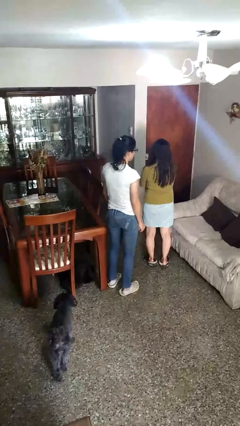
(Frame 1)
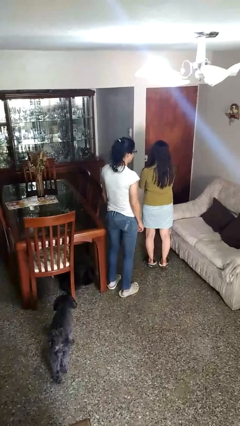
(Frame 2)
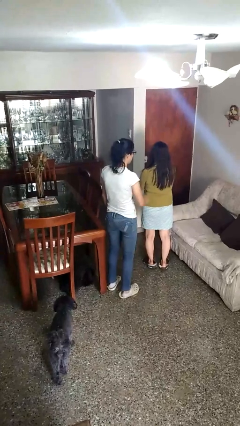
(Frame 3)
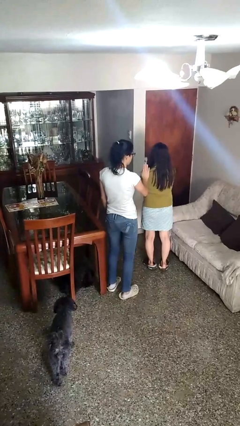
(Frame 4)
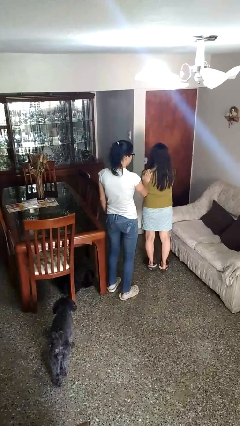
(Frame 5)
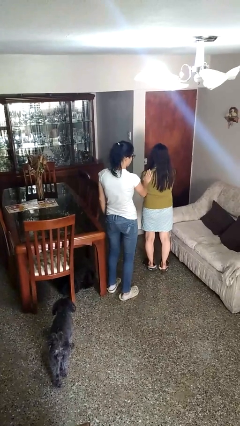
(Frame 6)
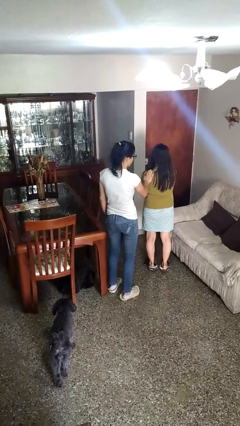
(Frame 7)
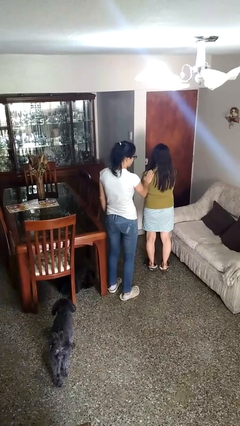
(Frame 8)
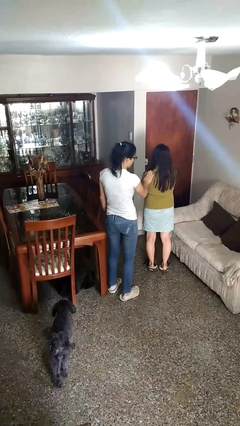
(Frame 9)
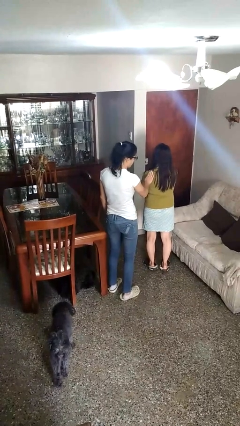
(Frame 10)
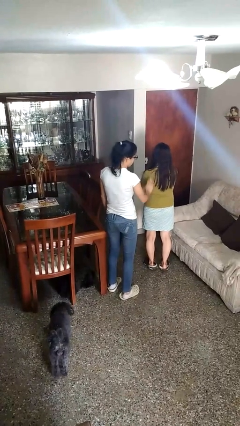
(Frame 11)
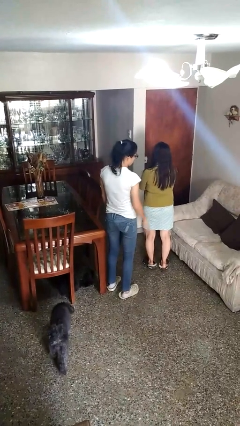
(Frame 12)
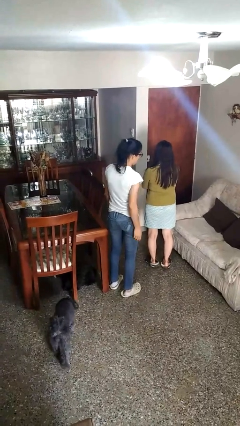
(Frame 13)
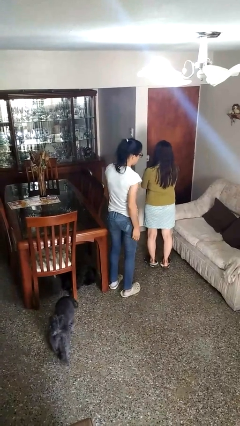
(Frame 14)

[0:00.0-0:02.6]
person touches back of person

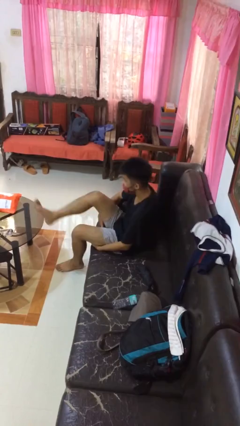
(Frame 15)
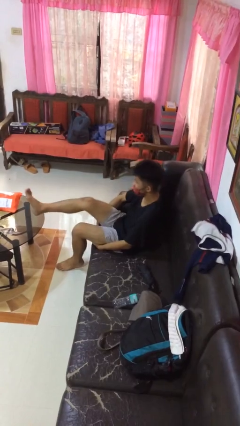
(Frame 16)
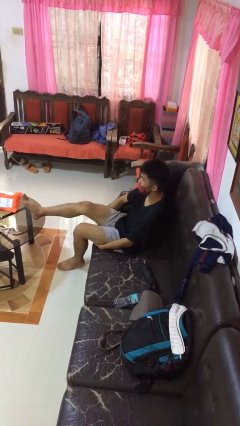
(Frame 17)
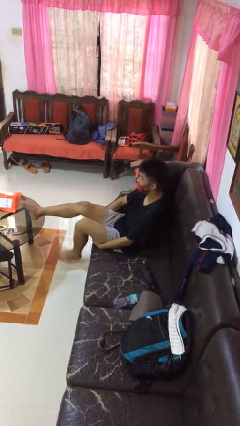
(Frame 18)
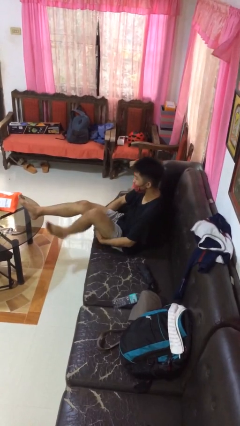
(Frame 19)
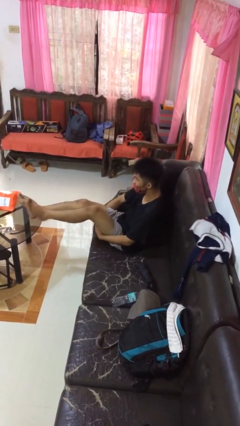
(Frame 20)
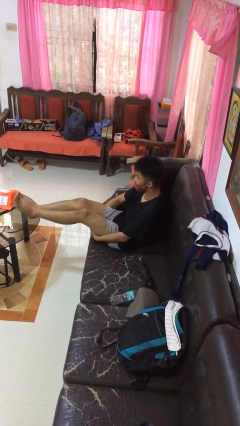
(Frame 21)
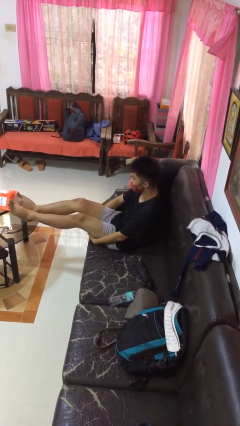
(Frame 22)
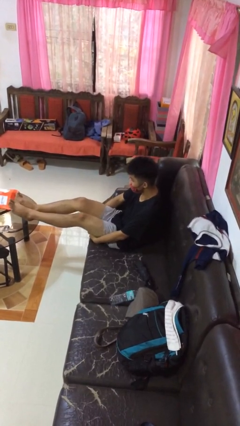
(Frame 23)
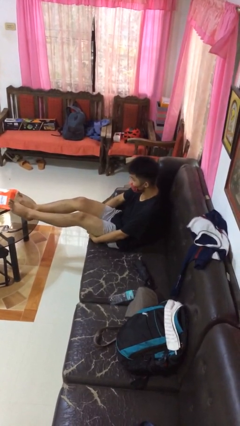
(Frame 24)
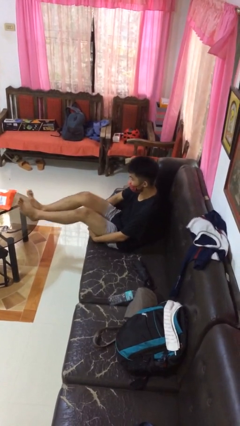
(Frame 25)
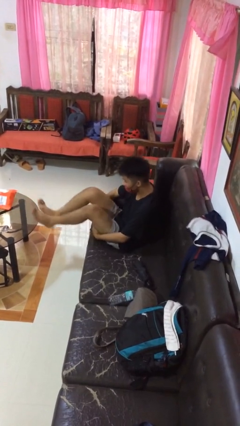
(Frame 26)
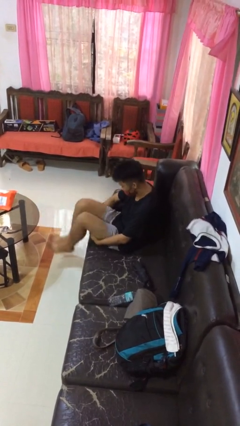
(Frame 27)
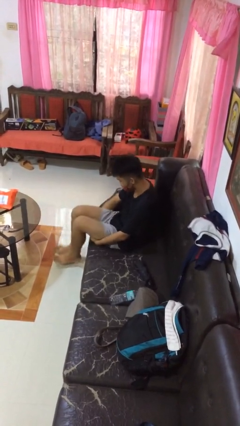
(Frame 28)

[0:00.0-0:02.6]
person puts feet up

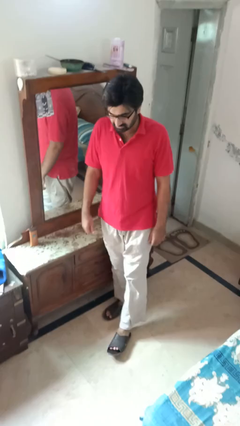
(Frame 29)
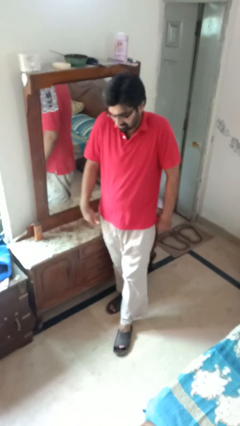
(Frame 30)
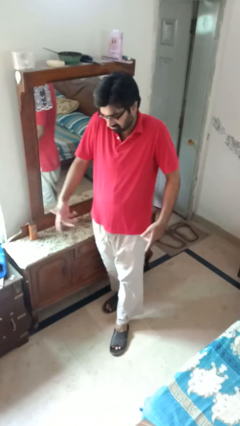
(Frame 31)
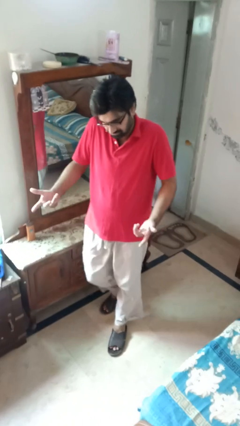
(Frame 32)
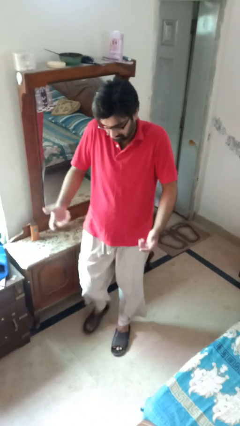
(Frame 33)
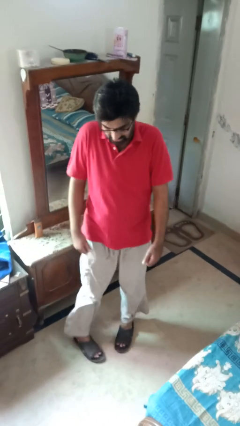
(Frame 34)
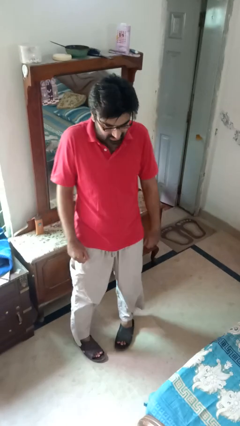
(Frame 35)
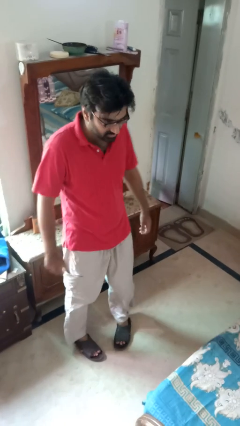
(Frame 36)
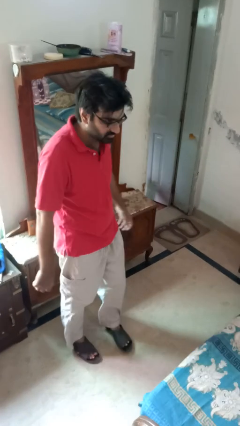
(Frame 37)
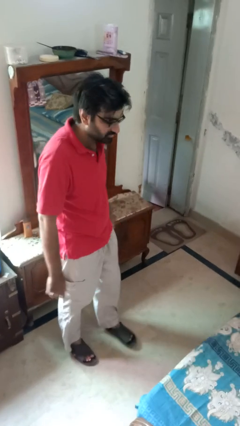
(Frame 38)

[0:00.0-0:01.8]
person shrugs

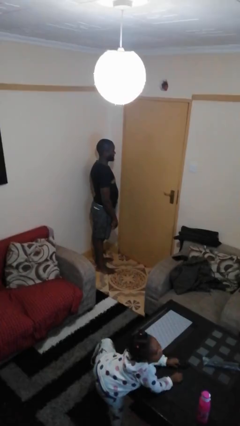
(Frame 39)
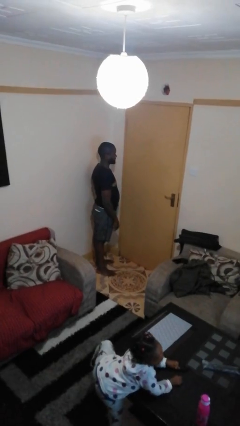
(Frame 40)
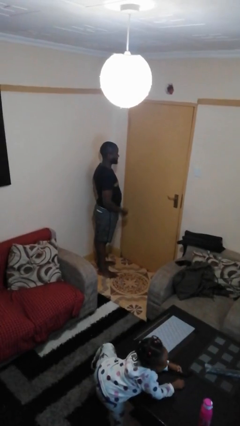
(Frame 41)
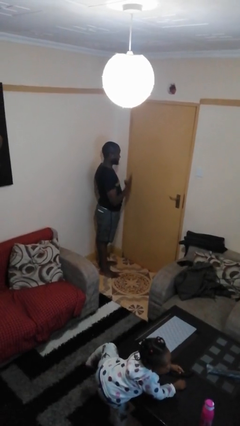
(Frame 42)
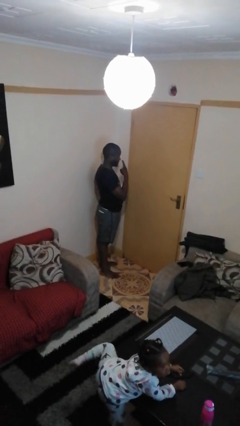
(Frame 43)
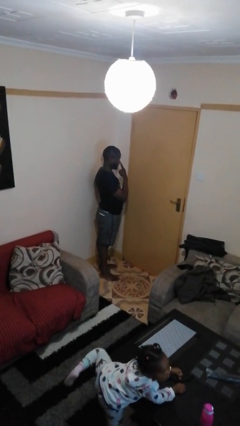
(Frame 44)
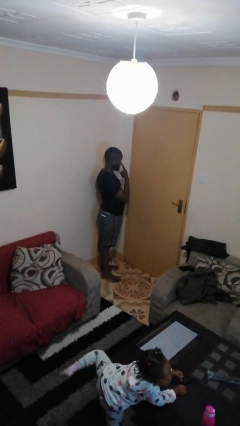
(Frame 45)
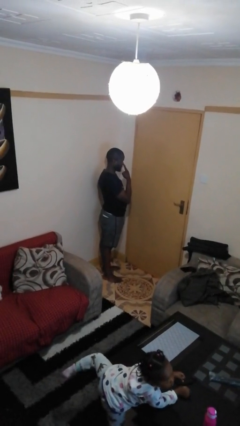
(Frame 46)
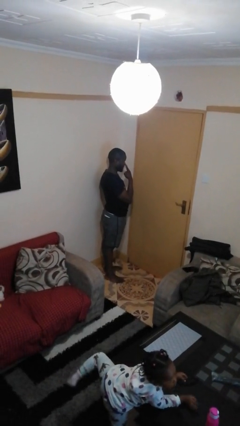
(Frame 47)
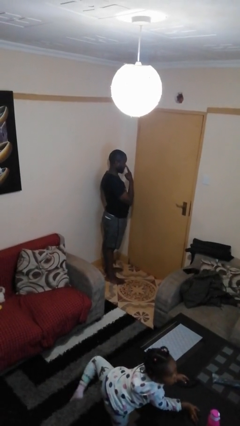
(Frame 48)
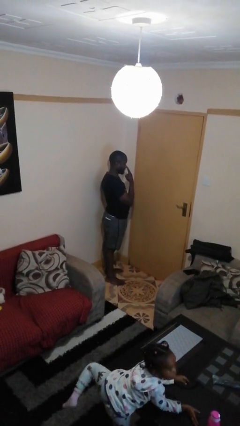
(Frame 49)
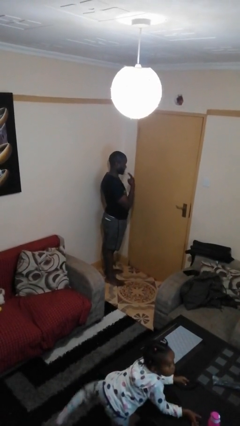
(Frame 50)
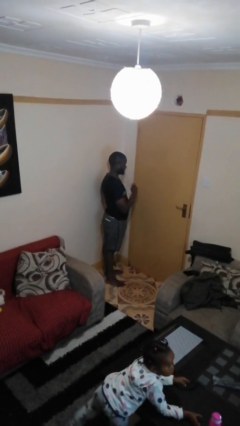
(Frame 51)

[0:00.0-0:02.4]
person gestures watch closely

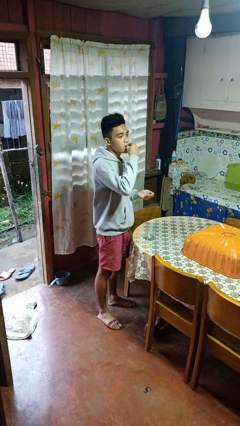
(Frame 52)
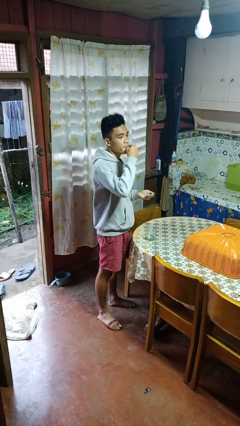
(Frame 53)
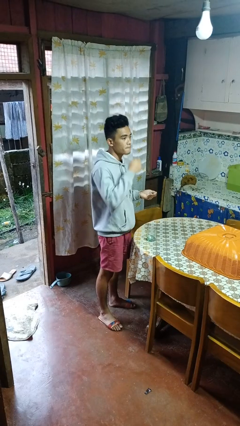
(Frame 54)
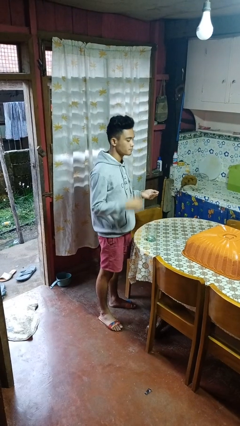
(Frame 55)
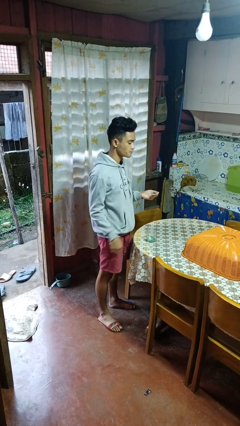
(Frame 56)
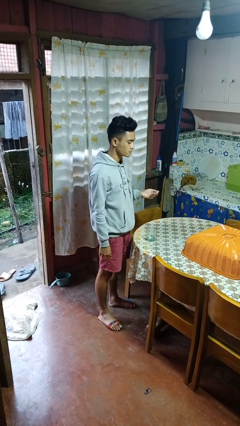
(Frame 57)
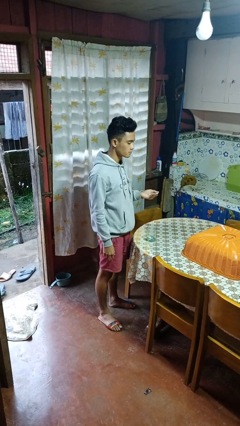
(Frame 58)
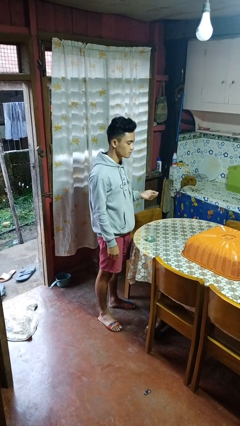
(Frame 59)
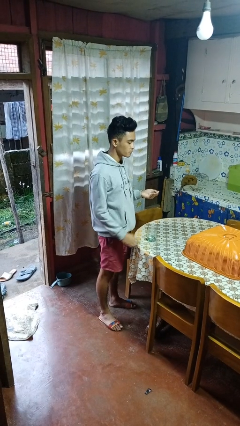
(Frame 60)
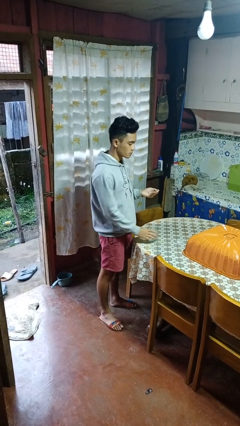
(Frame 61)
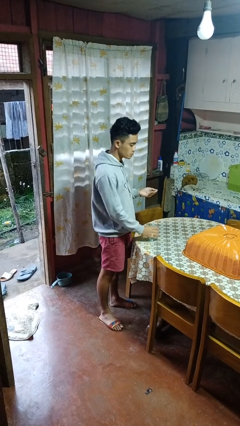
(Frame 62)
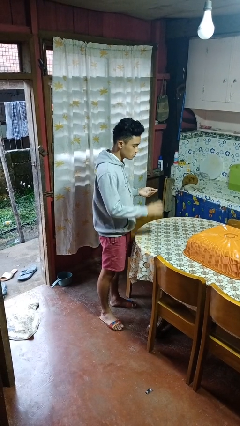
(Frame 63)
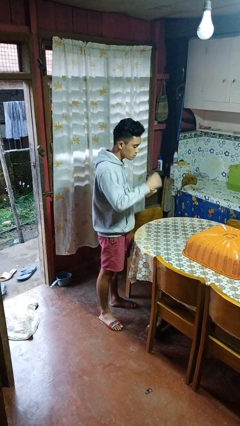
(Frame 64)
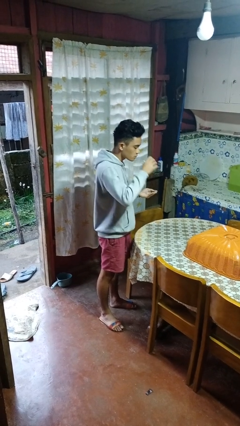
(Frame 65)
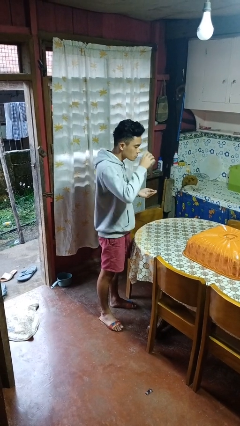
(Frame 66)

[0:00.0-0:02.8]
person takes medicine pills

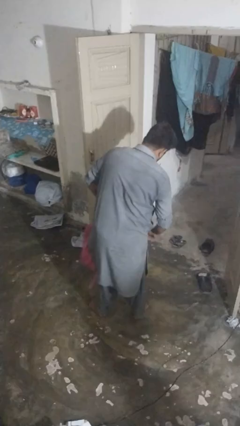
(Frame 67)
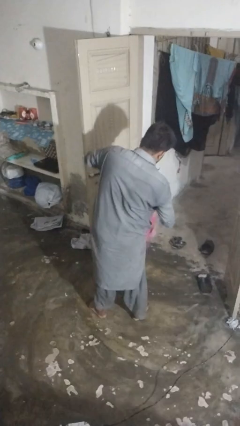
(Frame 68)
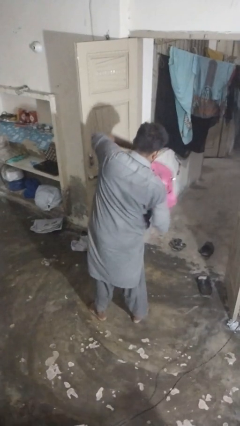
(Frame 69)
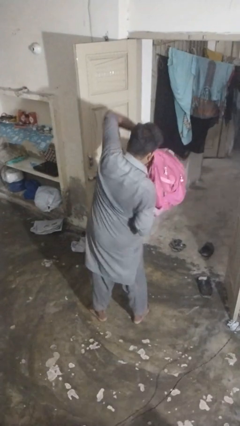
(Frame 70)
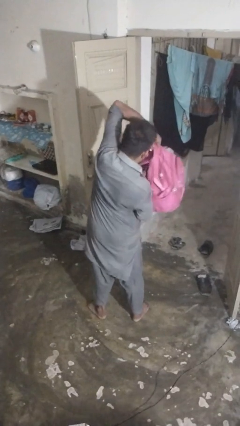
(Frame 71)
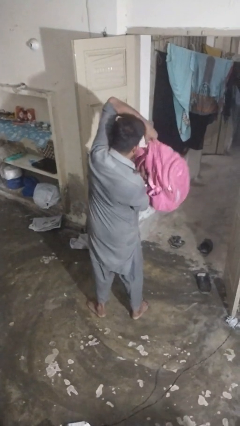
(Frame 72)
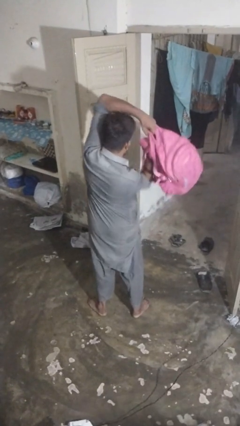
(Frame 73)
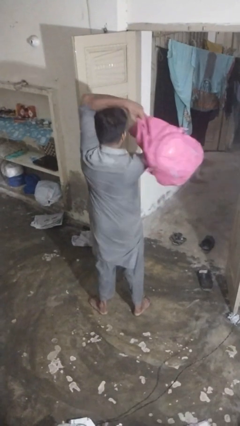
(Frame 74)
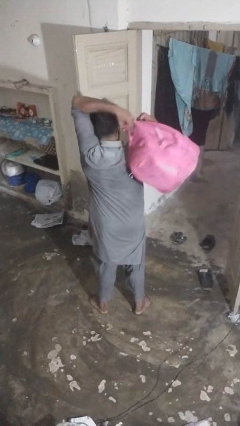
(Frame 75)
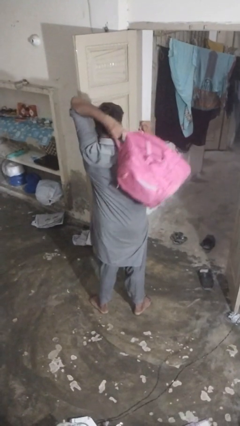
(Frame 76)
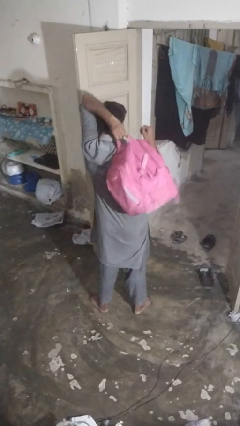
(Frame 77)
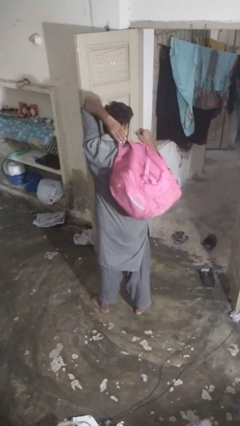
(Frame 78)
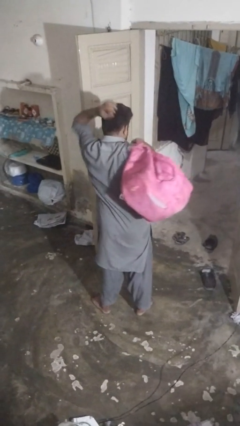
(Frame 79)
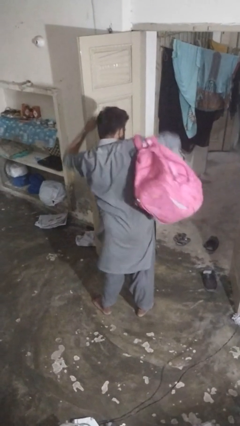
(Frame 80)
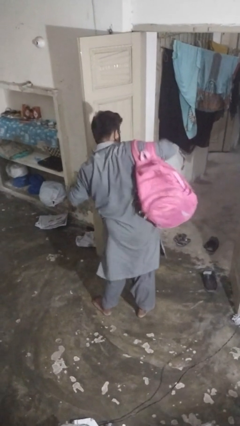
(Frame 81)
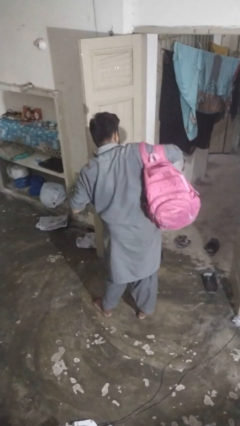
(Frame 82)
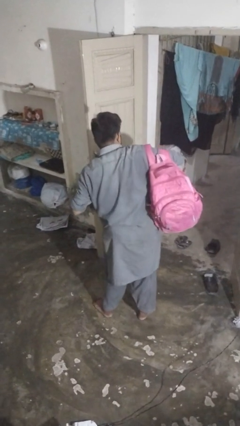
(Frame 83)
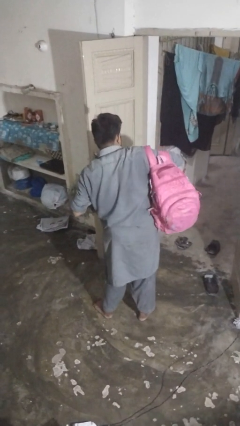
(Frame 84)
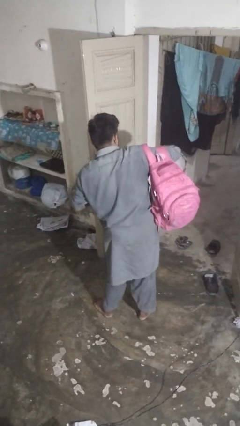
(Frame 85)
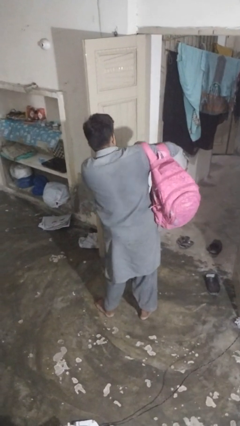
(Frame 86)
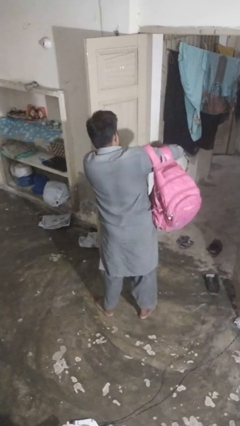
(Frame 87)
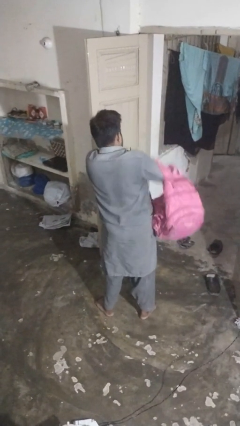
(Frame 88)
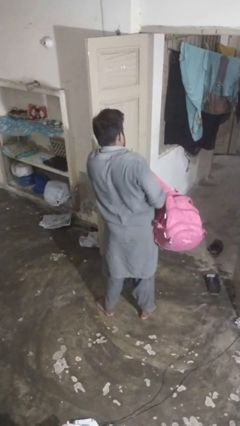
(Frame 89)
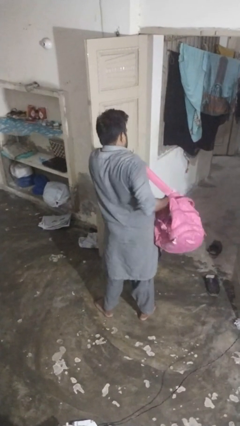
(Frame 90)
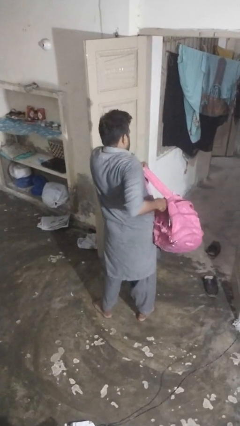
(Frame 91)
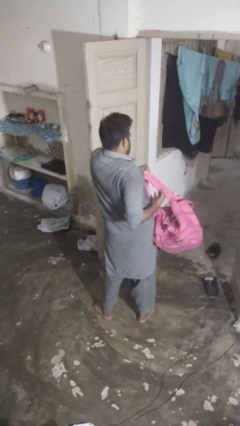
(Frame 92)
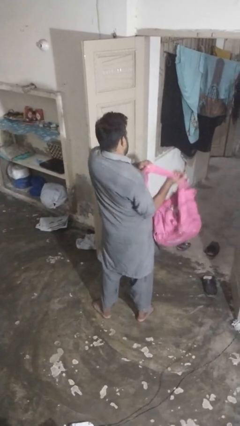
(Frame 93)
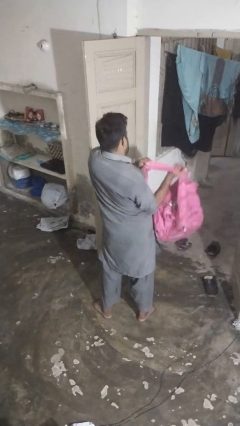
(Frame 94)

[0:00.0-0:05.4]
person puts on backpack
